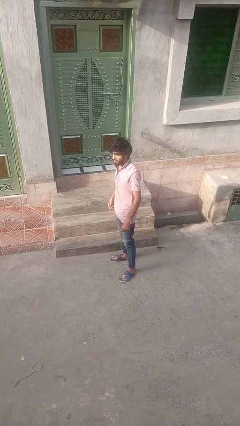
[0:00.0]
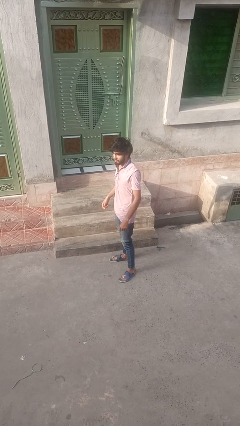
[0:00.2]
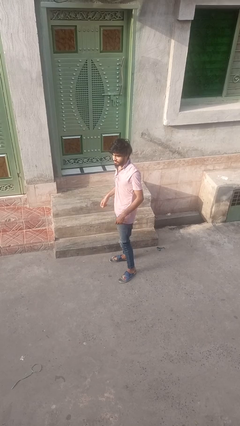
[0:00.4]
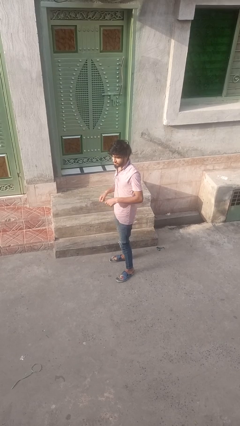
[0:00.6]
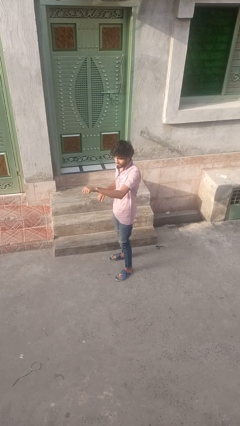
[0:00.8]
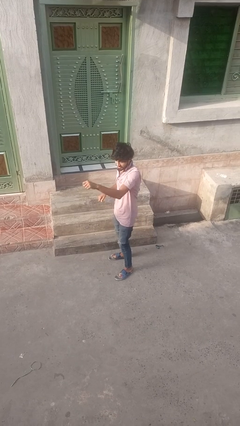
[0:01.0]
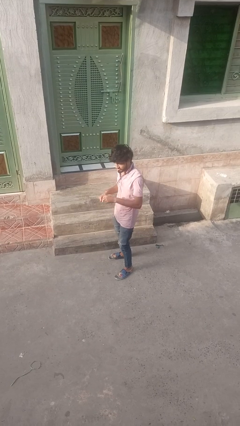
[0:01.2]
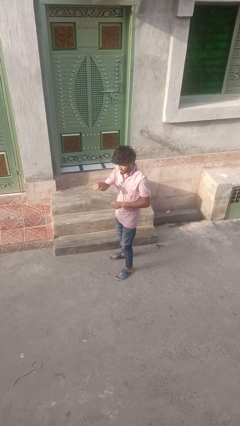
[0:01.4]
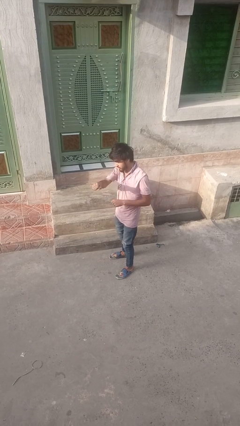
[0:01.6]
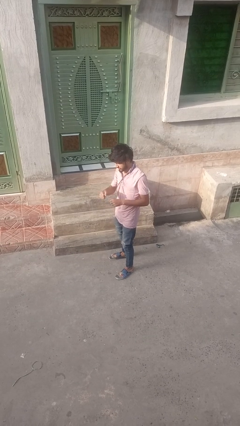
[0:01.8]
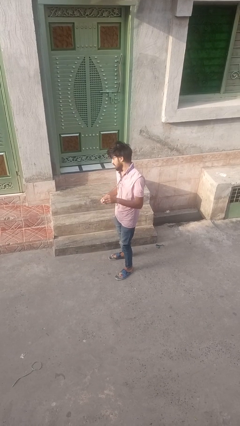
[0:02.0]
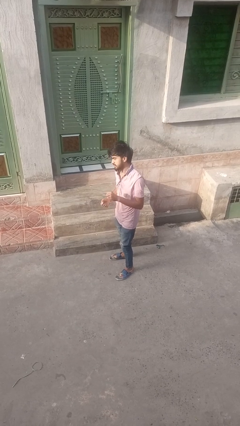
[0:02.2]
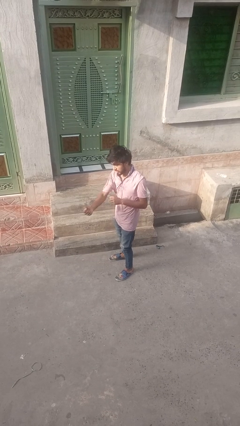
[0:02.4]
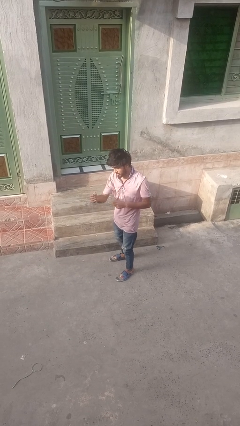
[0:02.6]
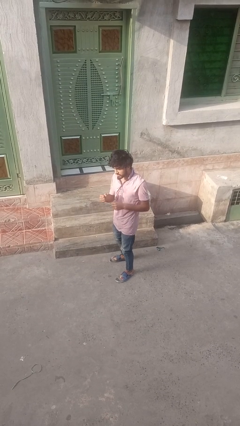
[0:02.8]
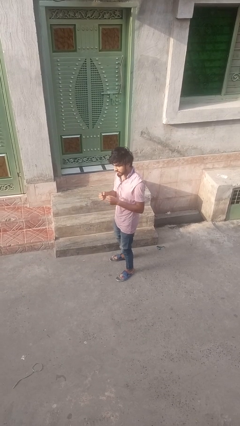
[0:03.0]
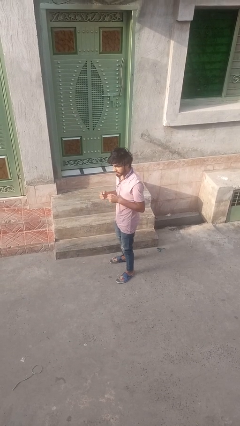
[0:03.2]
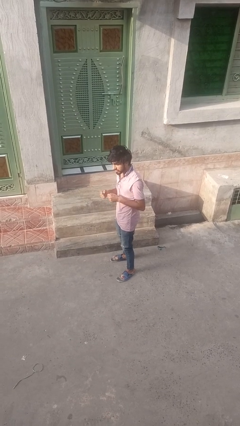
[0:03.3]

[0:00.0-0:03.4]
person punches

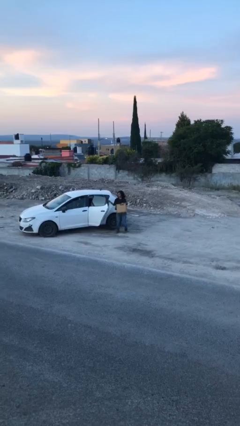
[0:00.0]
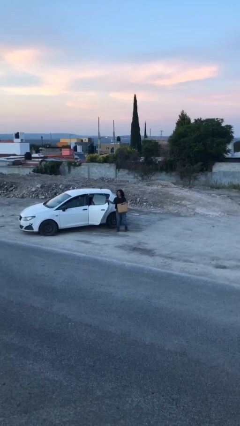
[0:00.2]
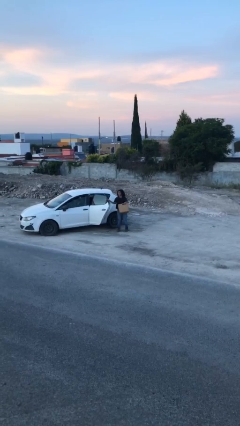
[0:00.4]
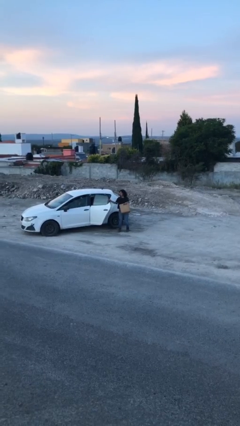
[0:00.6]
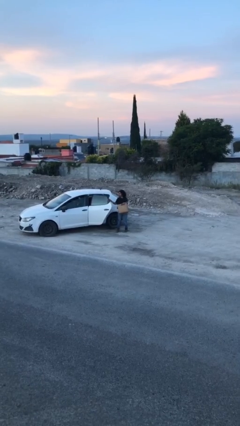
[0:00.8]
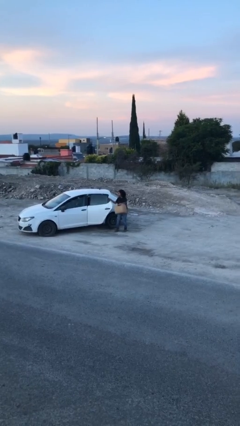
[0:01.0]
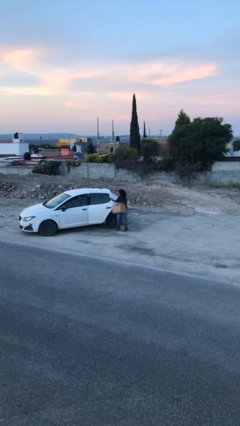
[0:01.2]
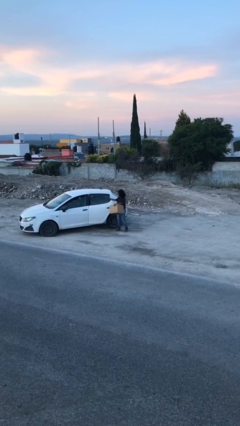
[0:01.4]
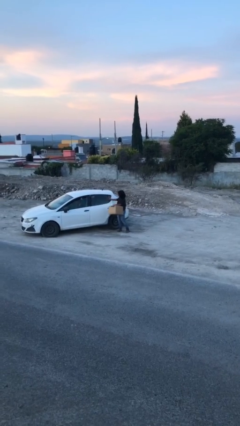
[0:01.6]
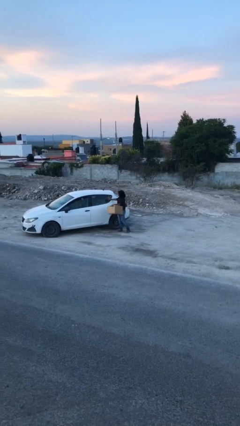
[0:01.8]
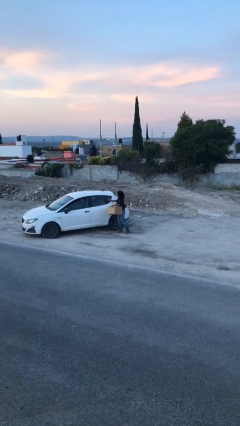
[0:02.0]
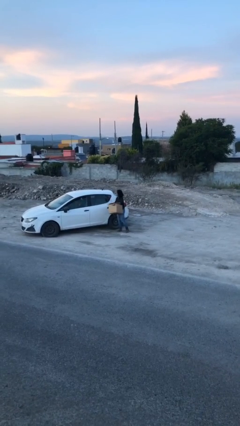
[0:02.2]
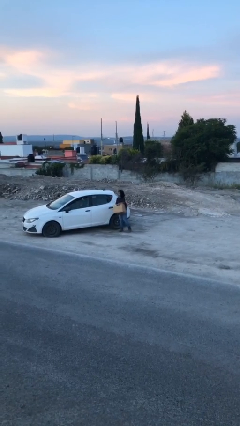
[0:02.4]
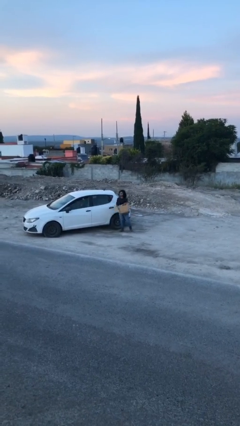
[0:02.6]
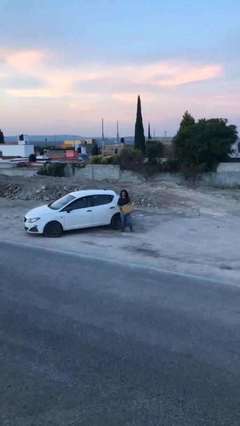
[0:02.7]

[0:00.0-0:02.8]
person closes car door

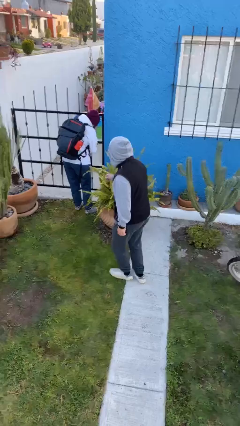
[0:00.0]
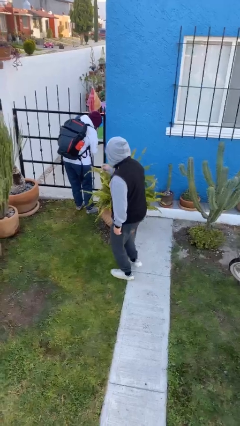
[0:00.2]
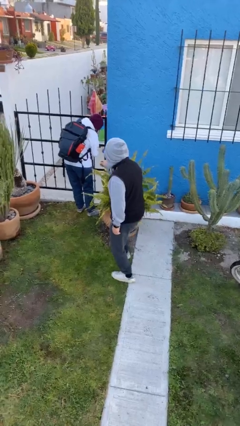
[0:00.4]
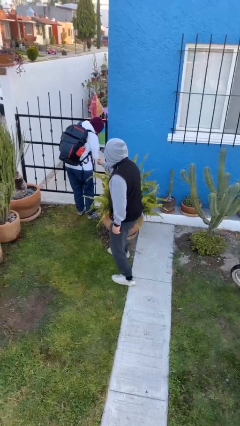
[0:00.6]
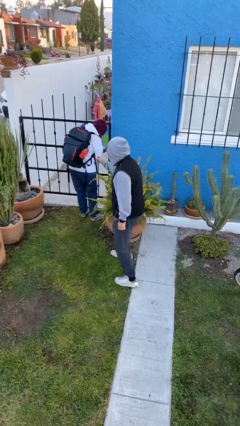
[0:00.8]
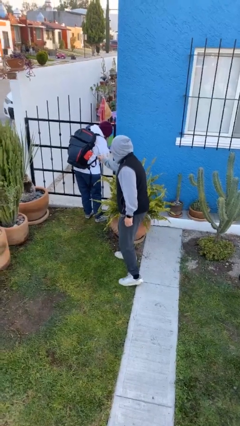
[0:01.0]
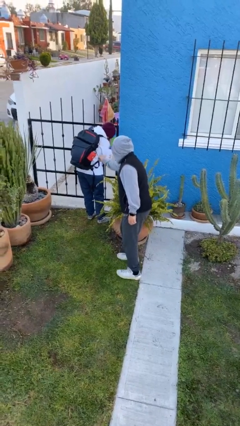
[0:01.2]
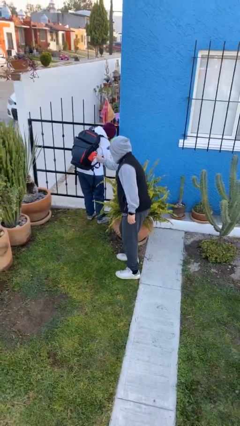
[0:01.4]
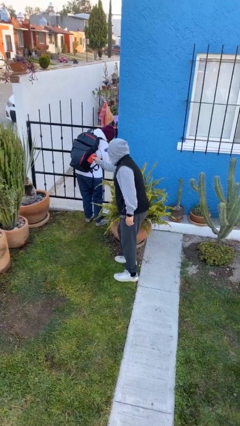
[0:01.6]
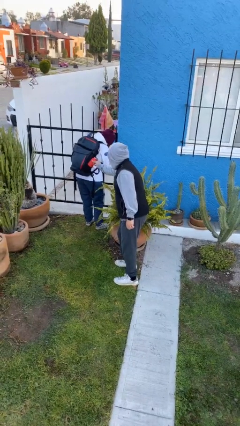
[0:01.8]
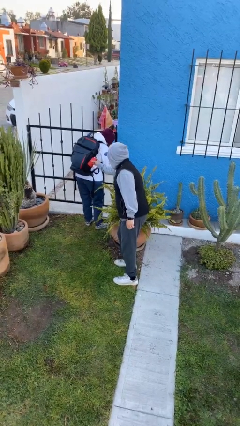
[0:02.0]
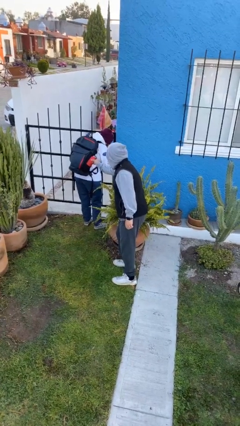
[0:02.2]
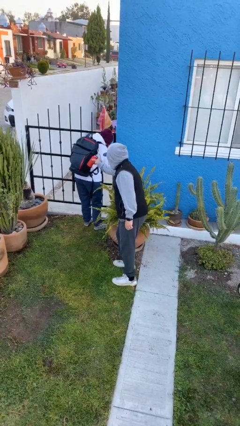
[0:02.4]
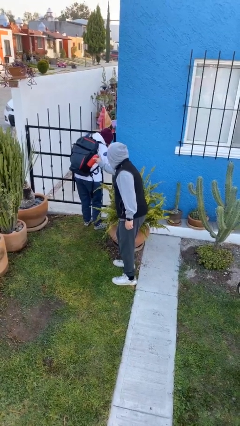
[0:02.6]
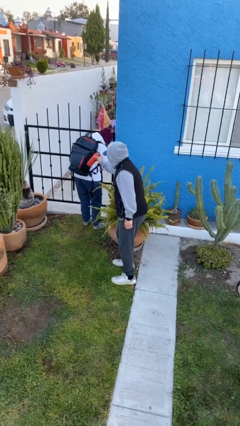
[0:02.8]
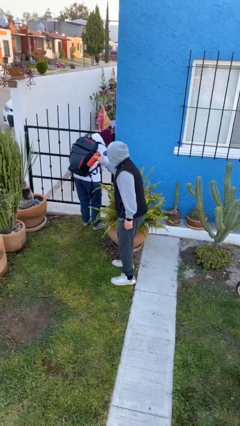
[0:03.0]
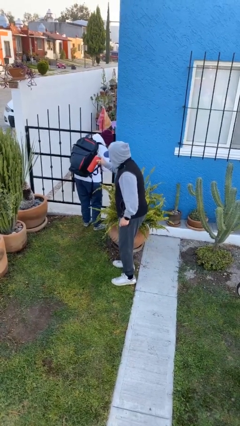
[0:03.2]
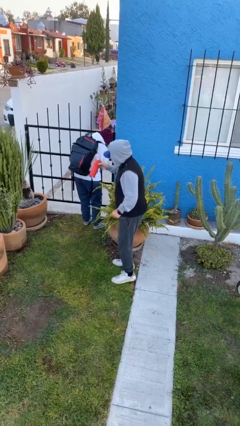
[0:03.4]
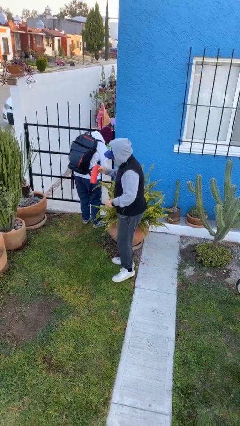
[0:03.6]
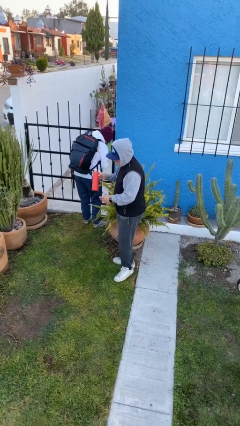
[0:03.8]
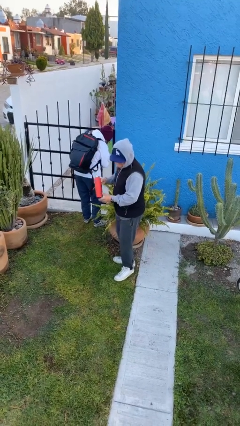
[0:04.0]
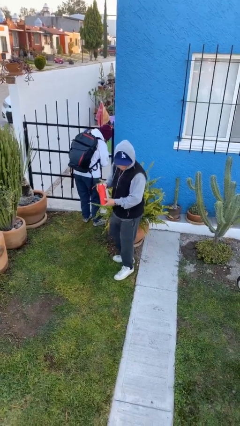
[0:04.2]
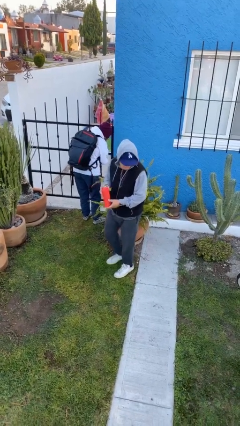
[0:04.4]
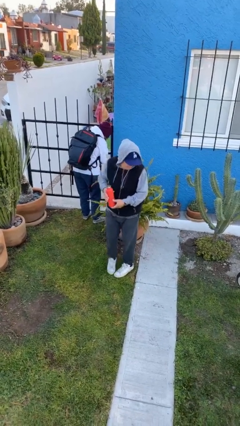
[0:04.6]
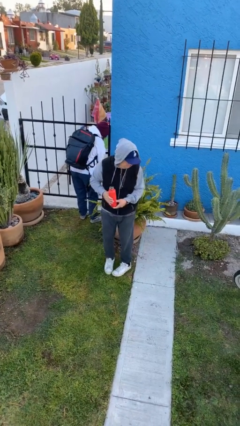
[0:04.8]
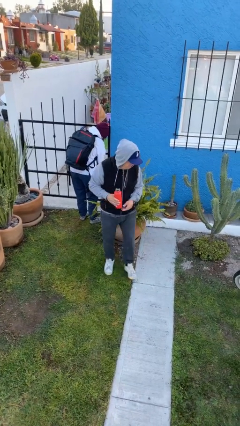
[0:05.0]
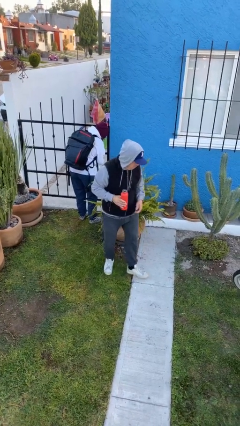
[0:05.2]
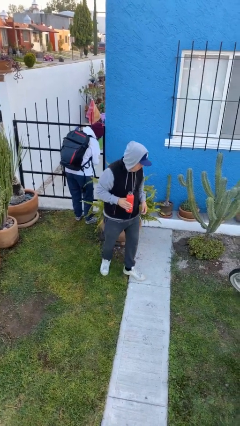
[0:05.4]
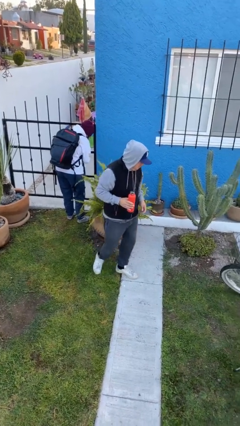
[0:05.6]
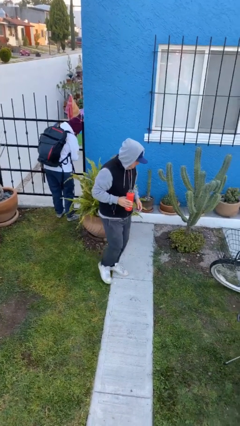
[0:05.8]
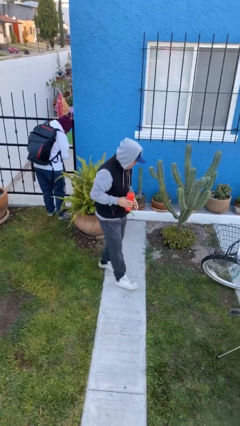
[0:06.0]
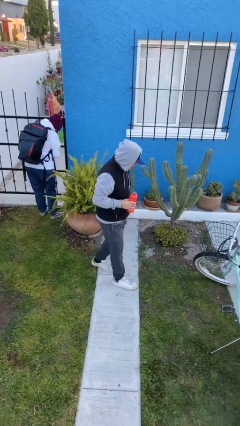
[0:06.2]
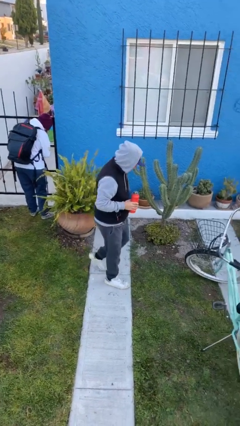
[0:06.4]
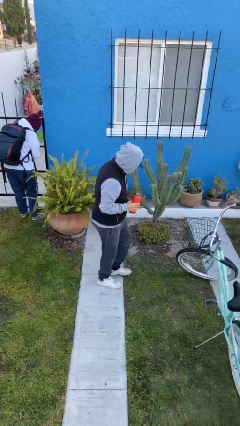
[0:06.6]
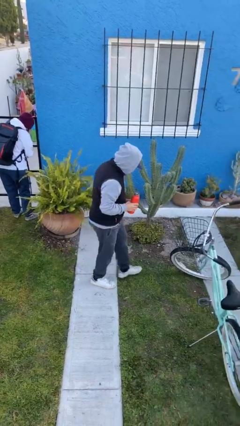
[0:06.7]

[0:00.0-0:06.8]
person steals object from person

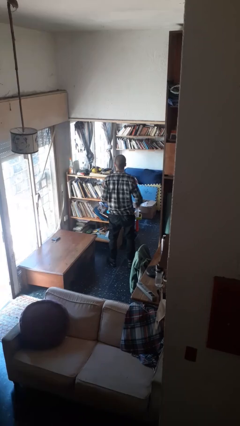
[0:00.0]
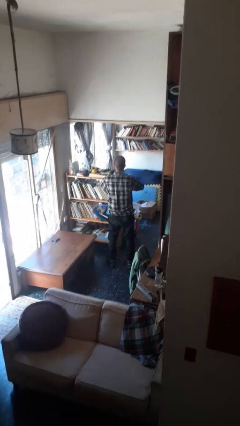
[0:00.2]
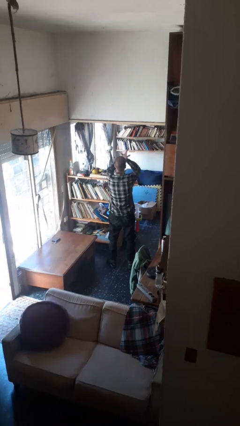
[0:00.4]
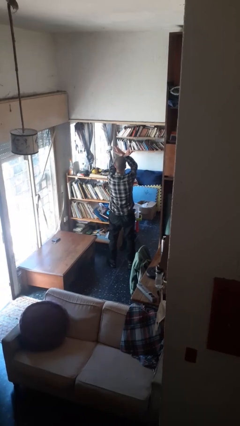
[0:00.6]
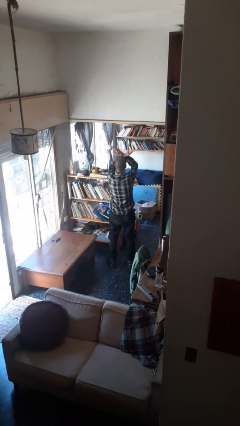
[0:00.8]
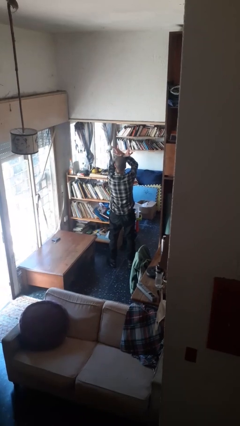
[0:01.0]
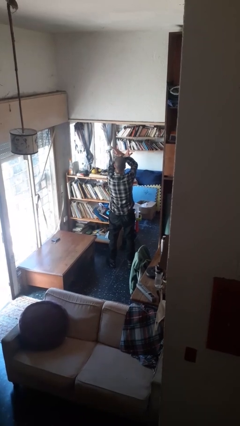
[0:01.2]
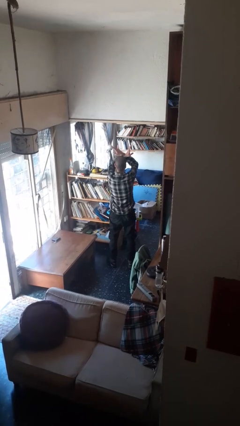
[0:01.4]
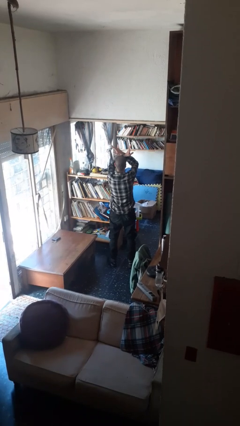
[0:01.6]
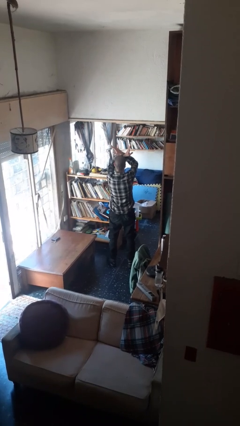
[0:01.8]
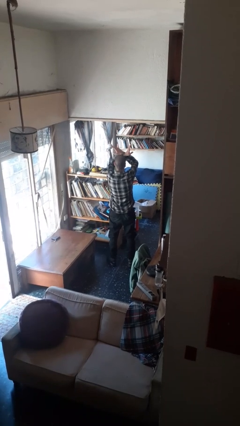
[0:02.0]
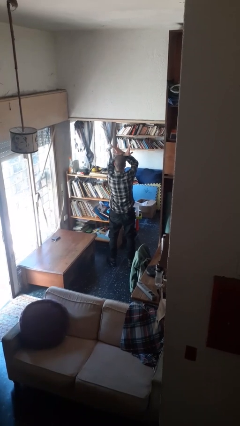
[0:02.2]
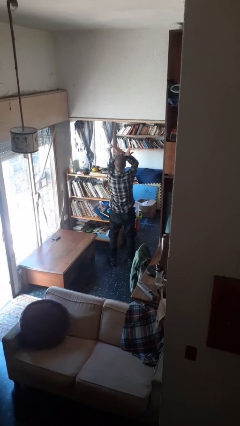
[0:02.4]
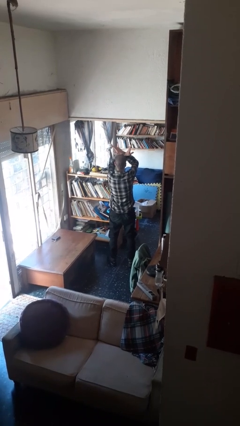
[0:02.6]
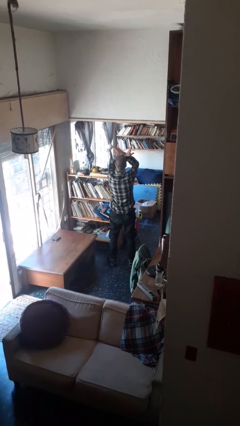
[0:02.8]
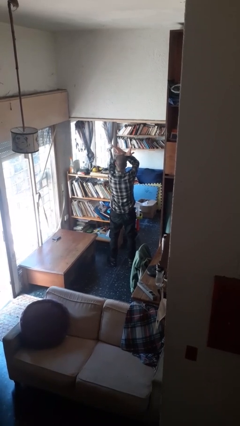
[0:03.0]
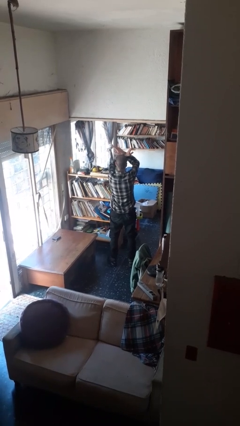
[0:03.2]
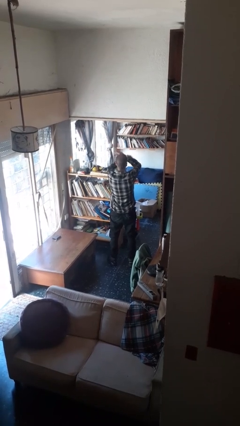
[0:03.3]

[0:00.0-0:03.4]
person gestures arms x

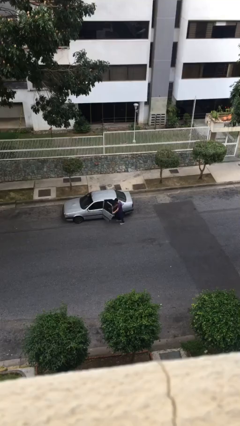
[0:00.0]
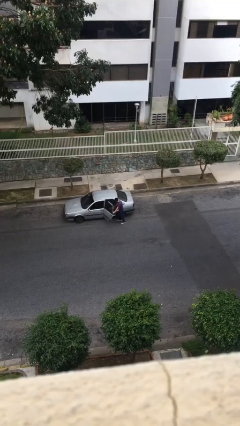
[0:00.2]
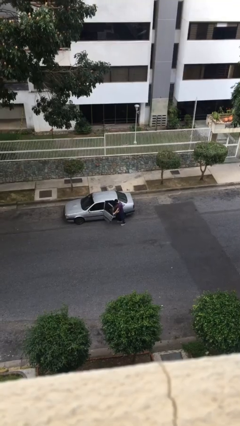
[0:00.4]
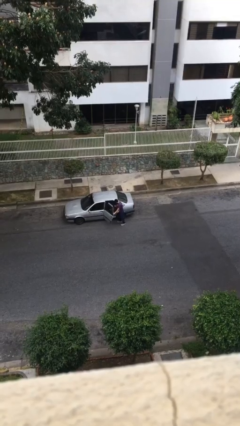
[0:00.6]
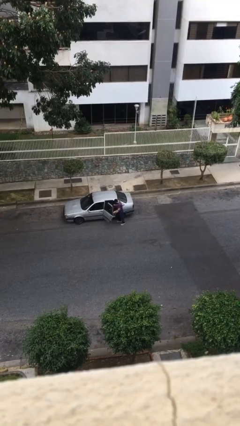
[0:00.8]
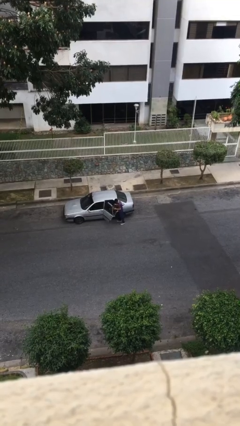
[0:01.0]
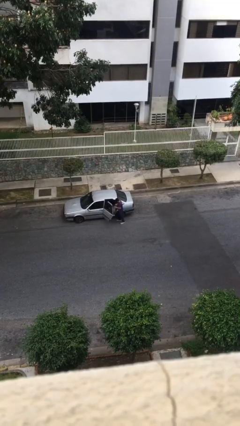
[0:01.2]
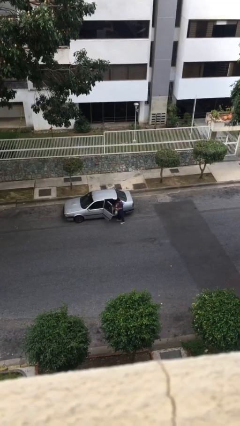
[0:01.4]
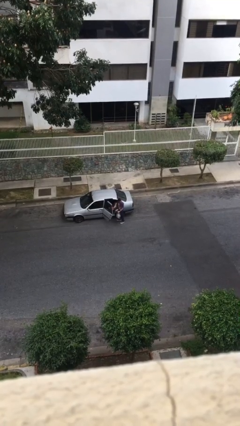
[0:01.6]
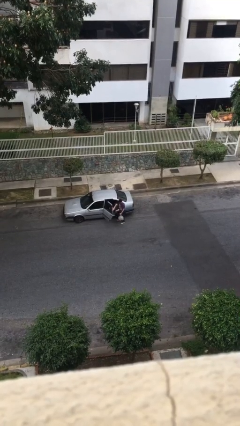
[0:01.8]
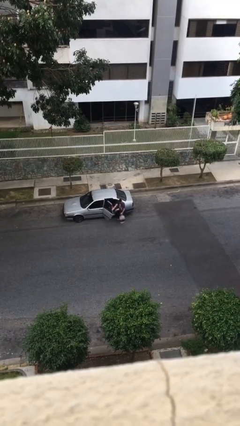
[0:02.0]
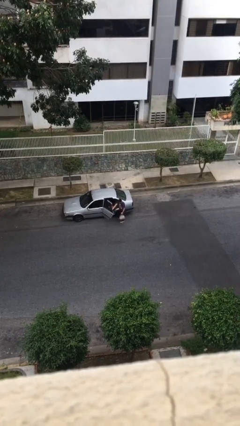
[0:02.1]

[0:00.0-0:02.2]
person unloads car
